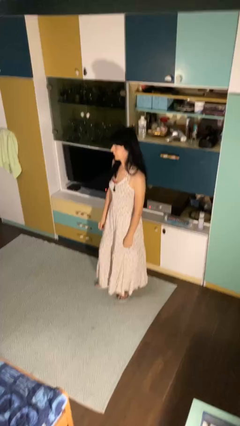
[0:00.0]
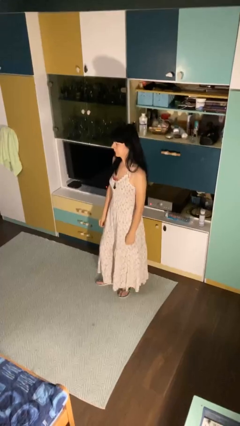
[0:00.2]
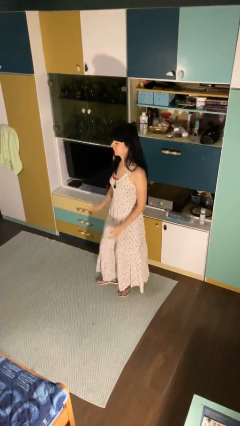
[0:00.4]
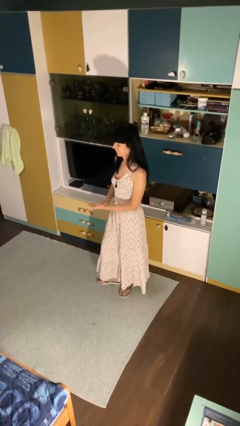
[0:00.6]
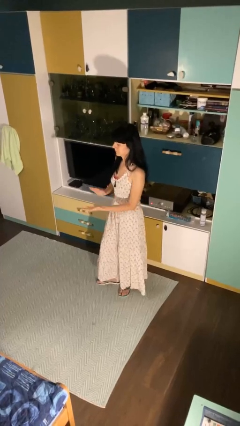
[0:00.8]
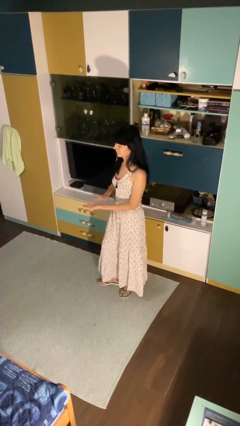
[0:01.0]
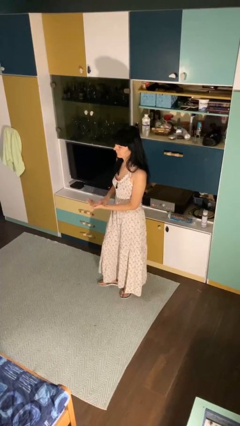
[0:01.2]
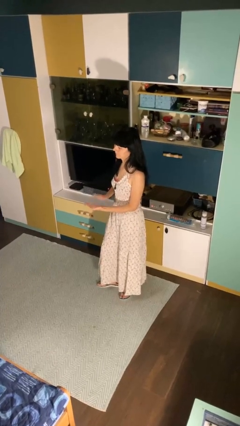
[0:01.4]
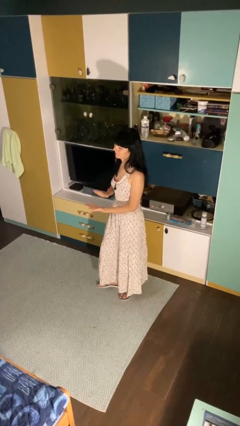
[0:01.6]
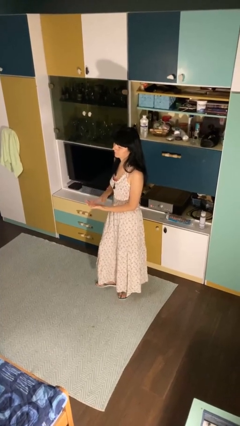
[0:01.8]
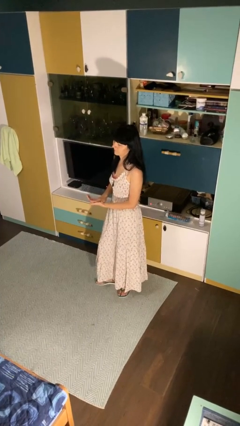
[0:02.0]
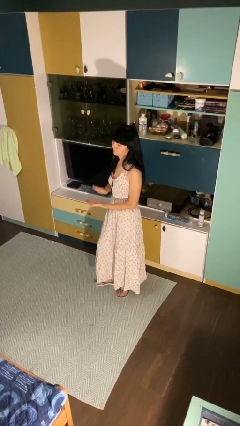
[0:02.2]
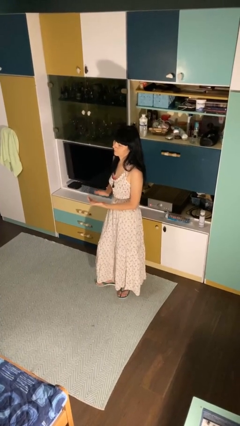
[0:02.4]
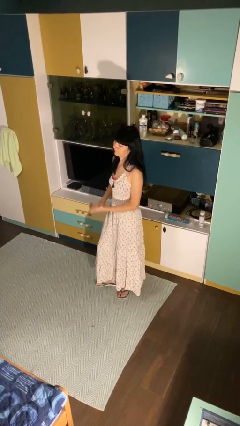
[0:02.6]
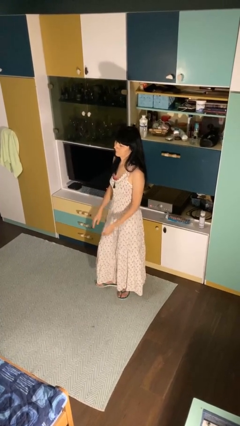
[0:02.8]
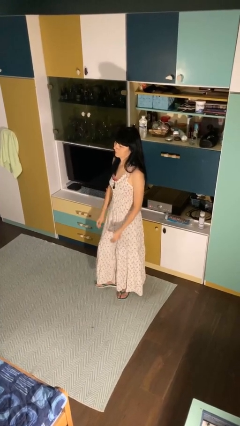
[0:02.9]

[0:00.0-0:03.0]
person claps hands

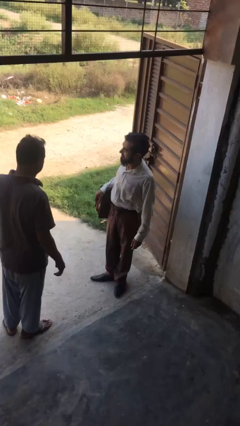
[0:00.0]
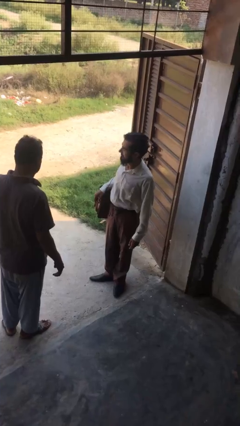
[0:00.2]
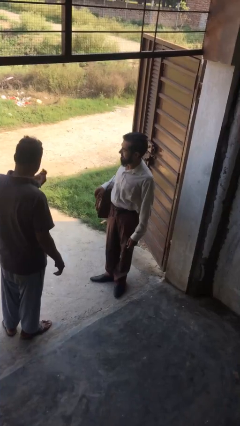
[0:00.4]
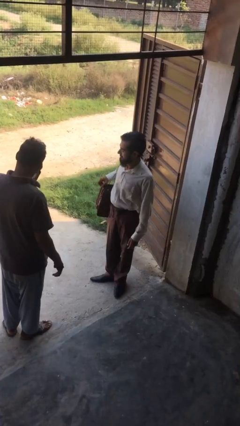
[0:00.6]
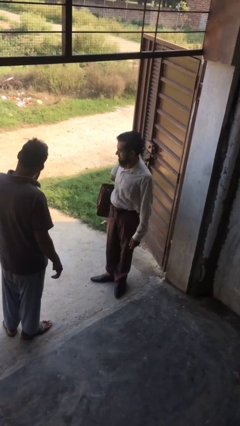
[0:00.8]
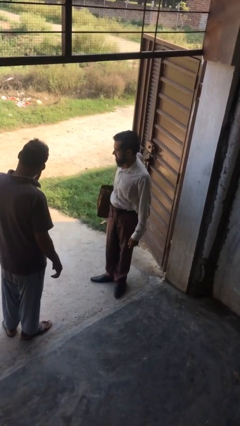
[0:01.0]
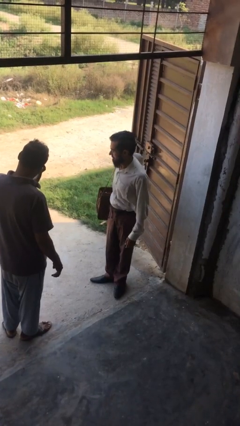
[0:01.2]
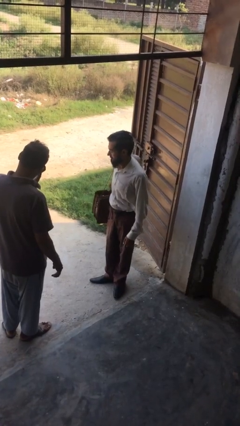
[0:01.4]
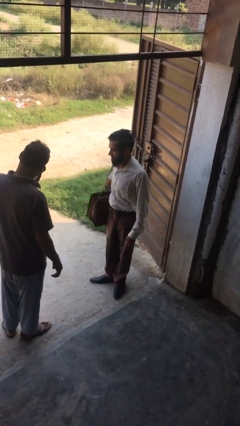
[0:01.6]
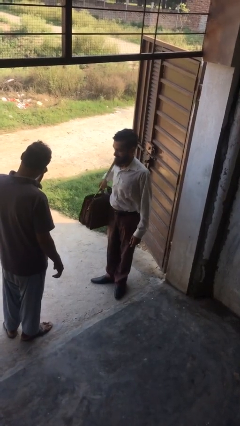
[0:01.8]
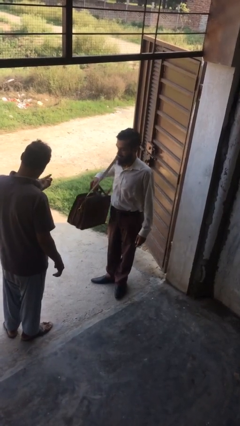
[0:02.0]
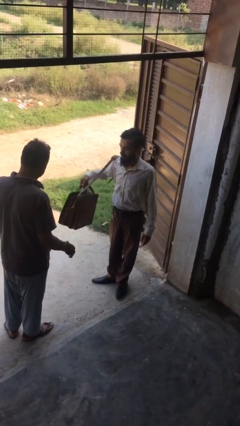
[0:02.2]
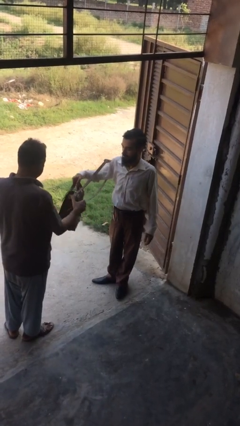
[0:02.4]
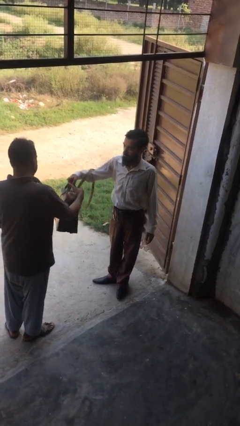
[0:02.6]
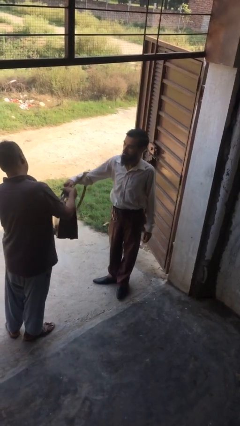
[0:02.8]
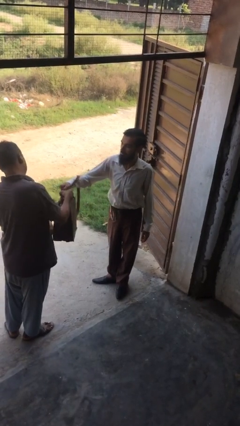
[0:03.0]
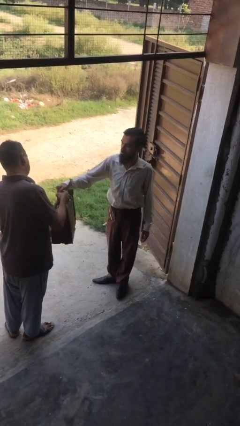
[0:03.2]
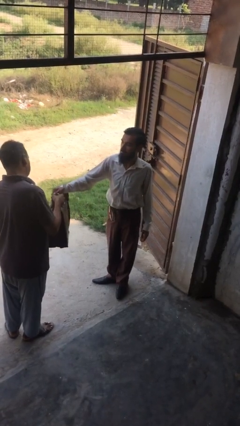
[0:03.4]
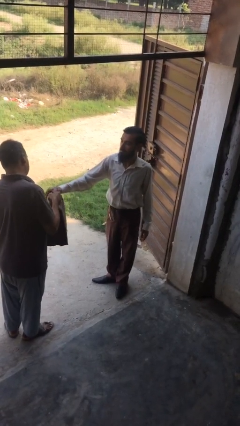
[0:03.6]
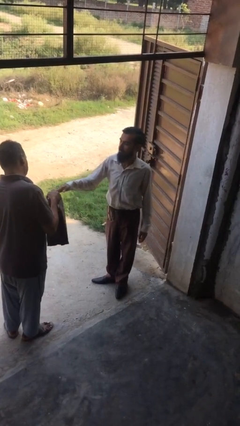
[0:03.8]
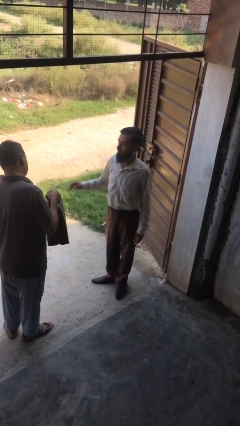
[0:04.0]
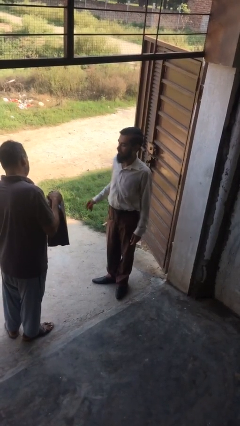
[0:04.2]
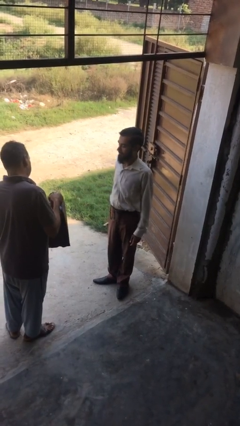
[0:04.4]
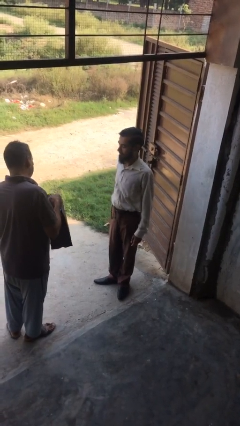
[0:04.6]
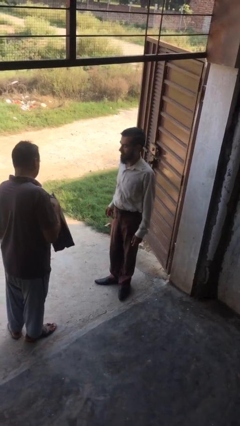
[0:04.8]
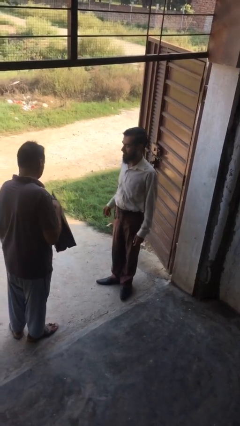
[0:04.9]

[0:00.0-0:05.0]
person transfers object to person

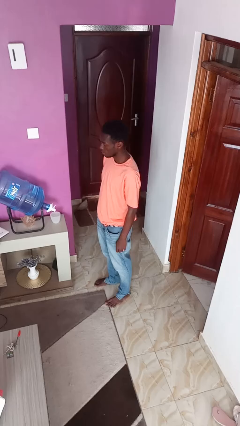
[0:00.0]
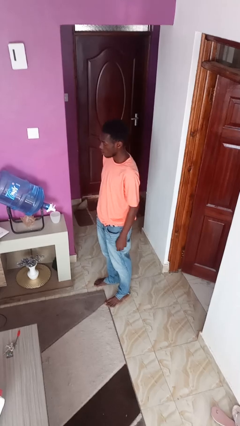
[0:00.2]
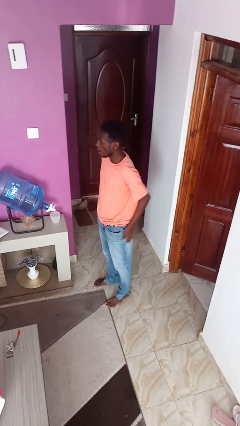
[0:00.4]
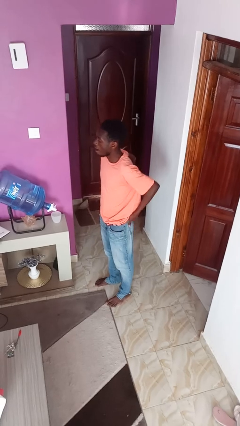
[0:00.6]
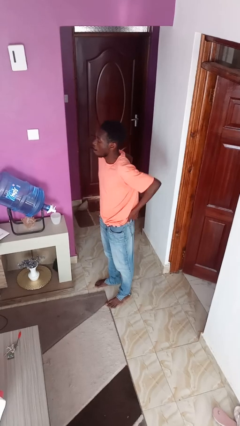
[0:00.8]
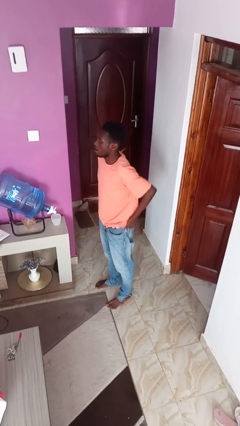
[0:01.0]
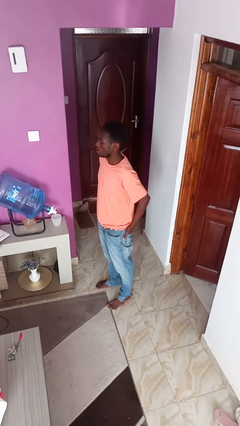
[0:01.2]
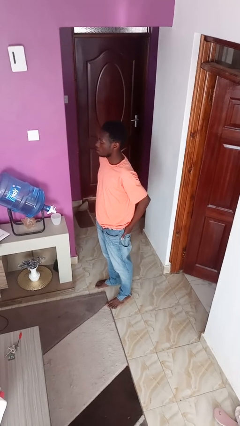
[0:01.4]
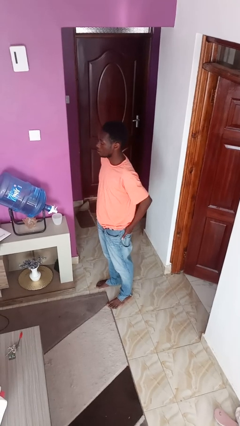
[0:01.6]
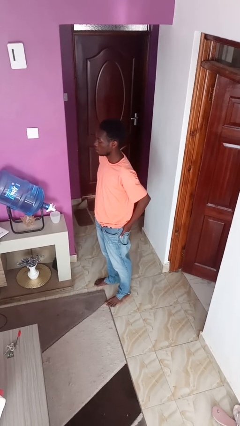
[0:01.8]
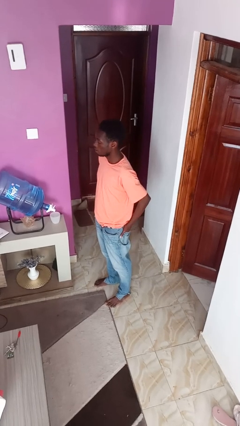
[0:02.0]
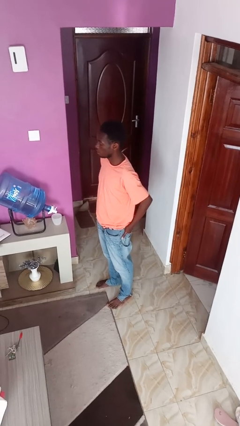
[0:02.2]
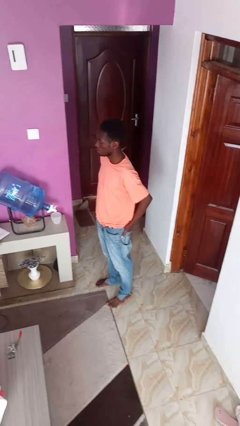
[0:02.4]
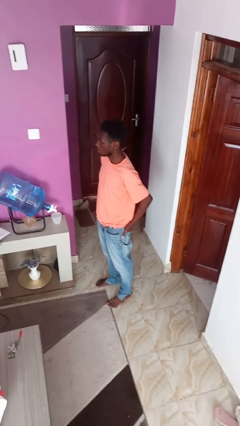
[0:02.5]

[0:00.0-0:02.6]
person puts hands in back pockets

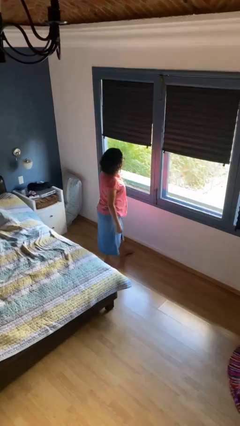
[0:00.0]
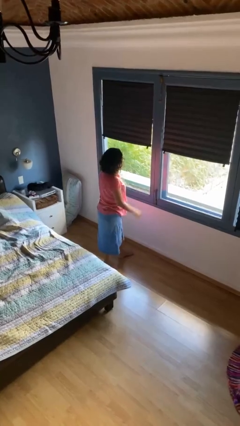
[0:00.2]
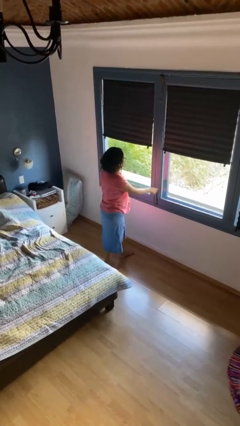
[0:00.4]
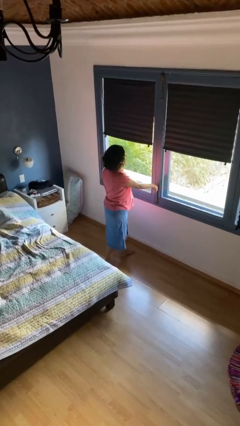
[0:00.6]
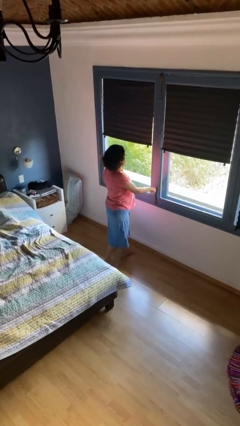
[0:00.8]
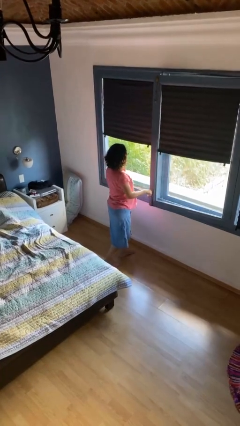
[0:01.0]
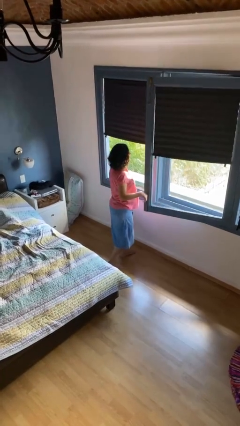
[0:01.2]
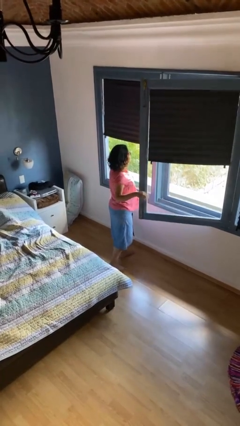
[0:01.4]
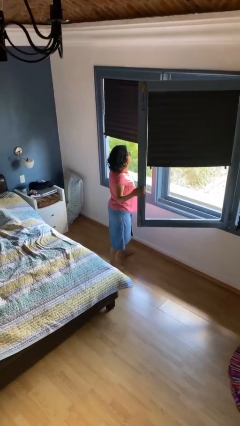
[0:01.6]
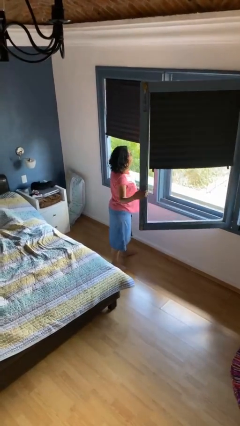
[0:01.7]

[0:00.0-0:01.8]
person opens home window

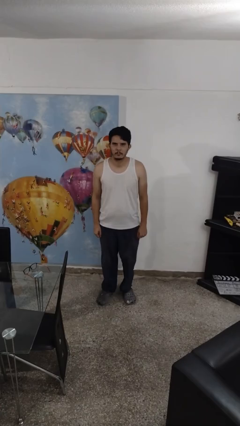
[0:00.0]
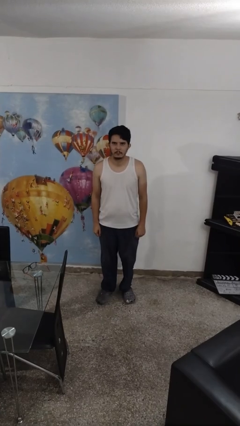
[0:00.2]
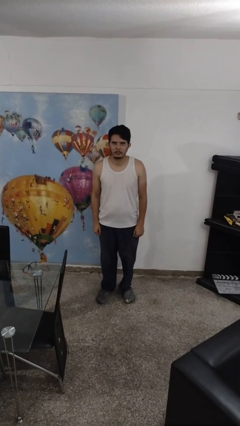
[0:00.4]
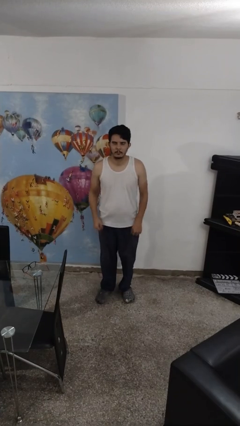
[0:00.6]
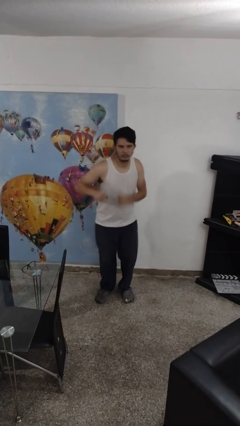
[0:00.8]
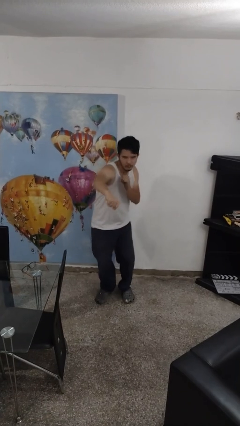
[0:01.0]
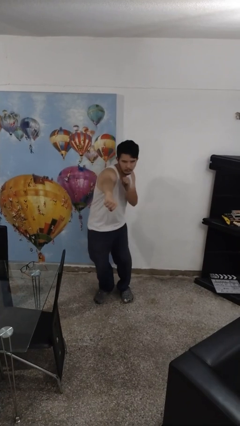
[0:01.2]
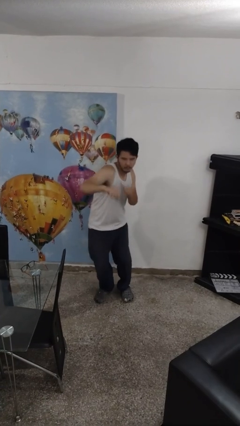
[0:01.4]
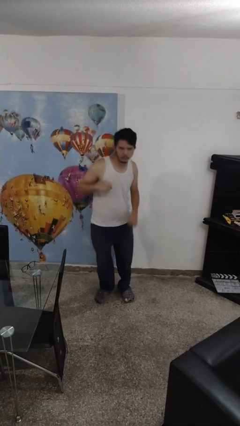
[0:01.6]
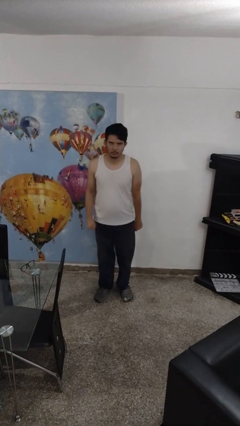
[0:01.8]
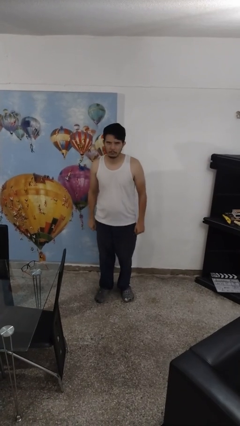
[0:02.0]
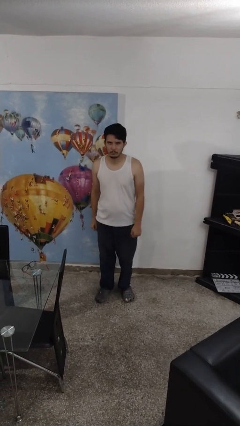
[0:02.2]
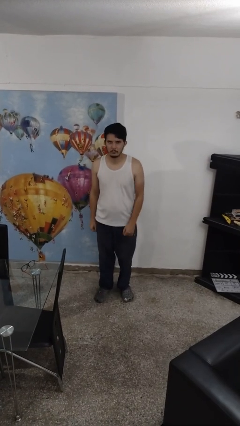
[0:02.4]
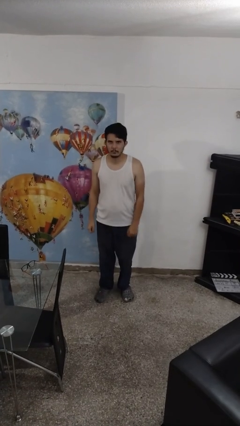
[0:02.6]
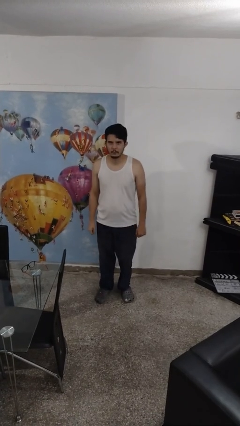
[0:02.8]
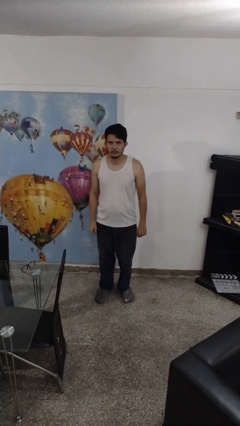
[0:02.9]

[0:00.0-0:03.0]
person karate chop

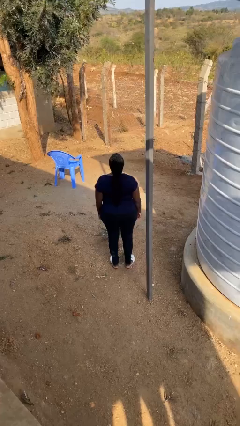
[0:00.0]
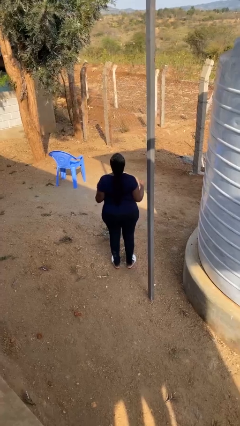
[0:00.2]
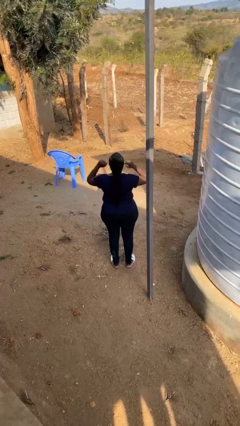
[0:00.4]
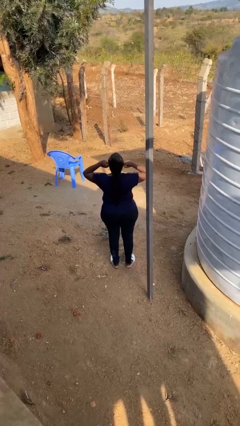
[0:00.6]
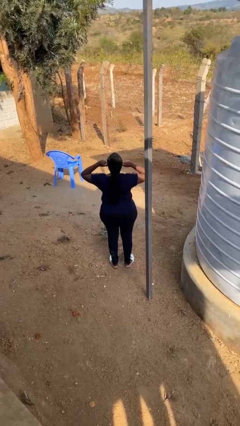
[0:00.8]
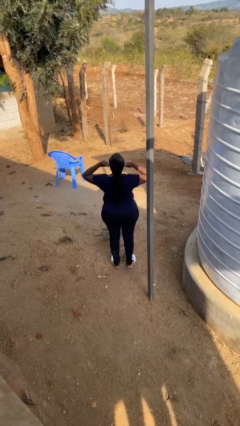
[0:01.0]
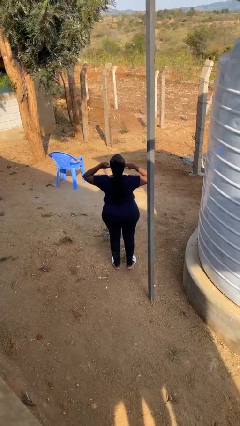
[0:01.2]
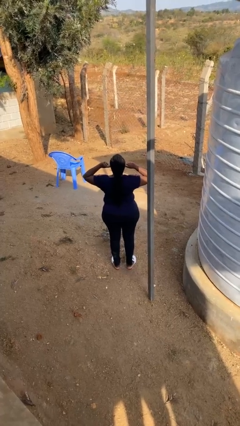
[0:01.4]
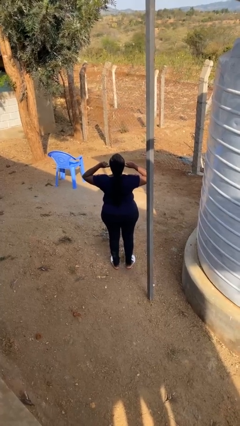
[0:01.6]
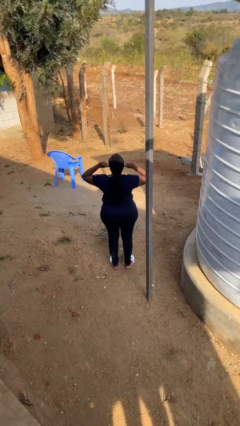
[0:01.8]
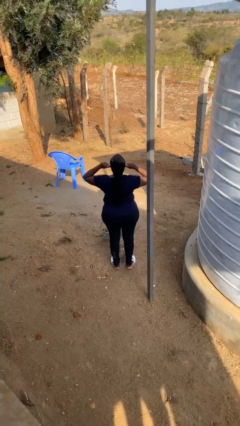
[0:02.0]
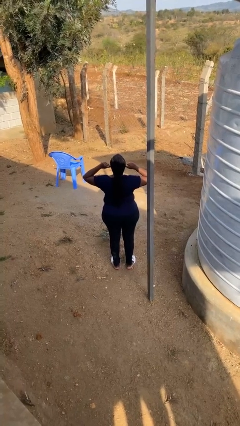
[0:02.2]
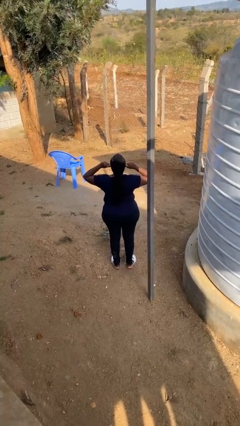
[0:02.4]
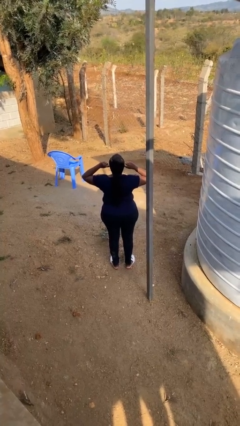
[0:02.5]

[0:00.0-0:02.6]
person puts fingers in ear
